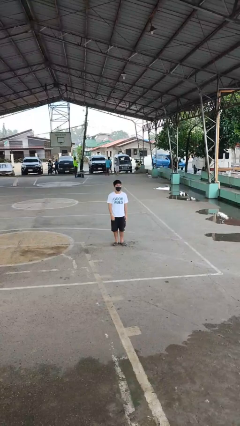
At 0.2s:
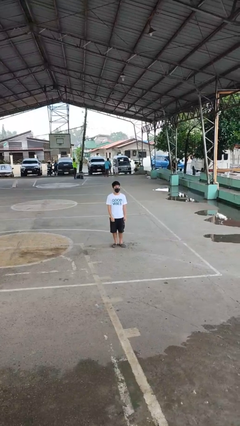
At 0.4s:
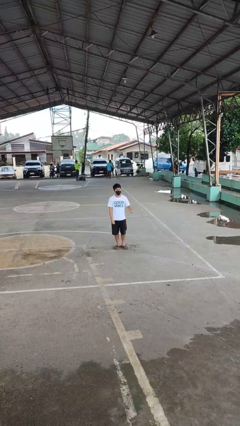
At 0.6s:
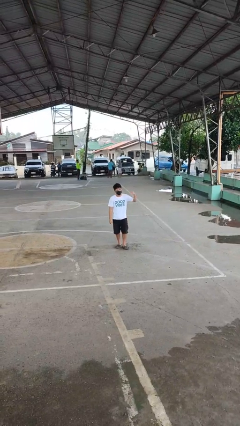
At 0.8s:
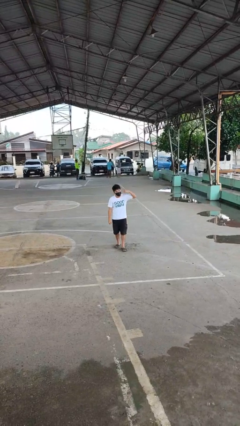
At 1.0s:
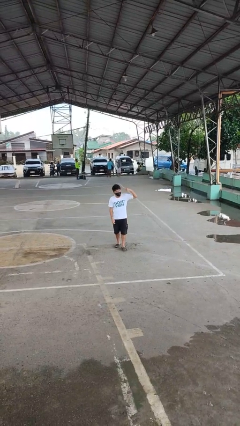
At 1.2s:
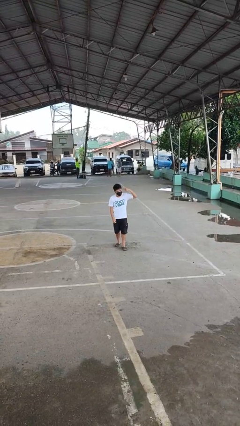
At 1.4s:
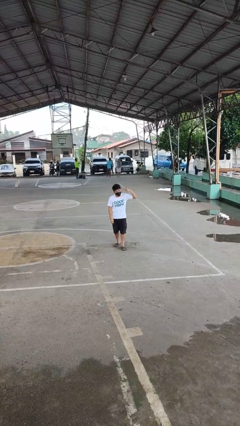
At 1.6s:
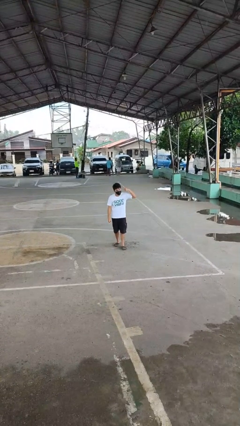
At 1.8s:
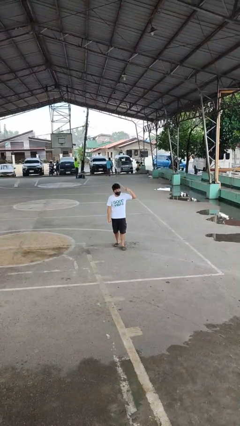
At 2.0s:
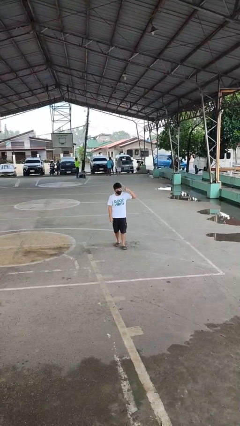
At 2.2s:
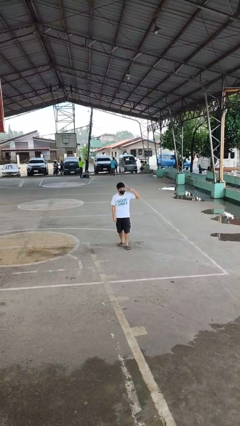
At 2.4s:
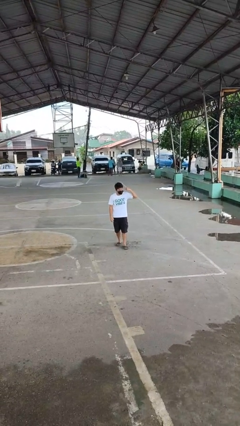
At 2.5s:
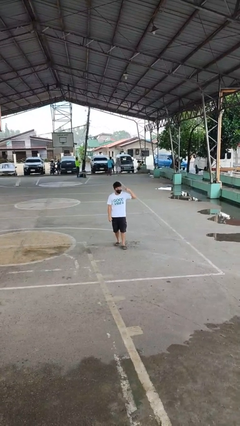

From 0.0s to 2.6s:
person gestures listen closely

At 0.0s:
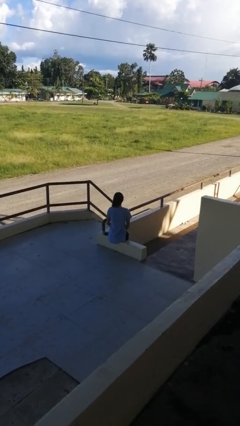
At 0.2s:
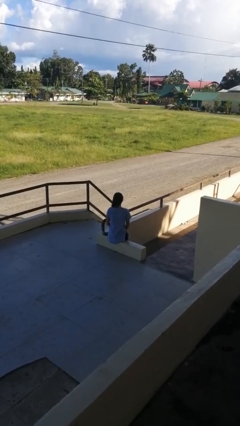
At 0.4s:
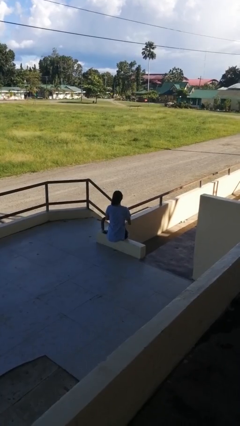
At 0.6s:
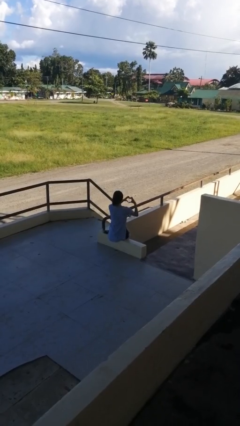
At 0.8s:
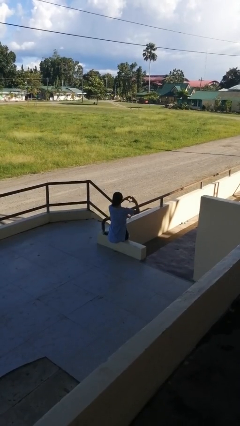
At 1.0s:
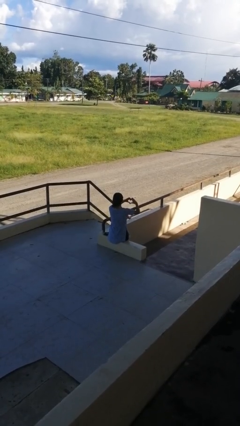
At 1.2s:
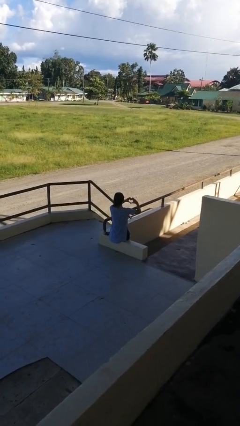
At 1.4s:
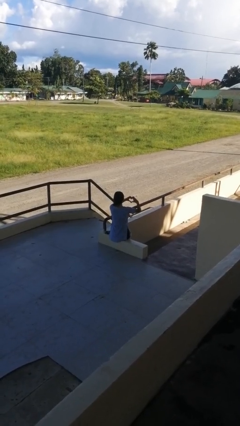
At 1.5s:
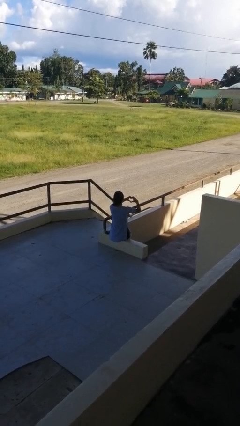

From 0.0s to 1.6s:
person gestures heart

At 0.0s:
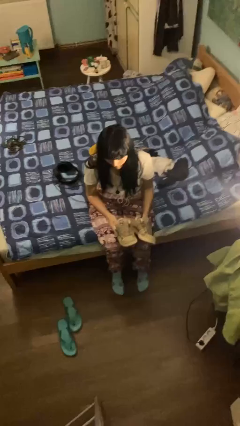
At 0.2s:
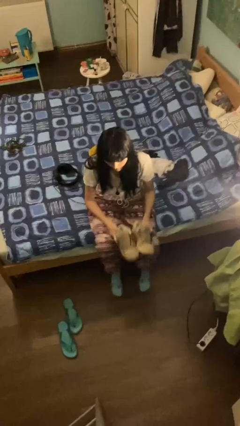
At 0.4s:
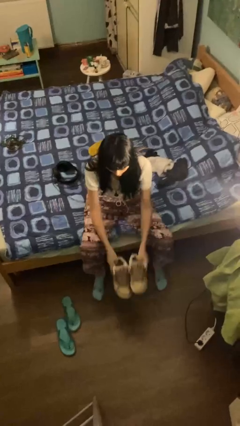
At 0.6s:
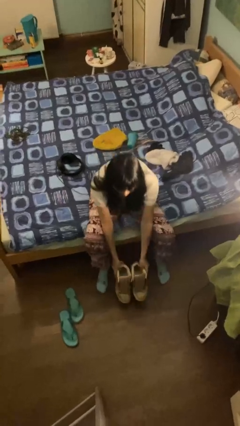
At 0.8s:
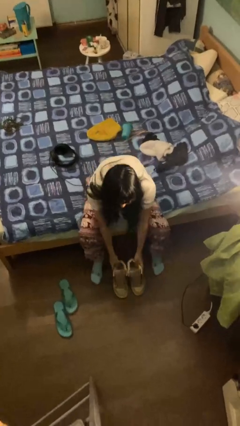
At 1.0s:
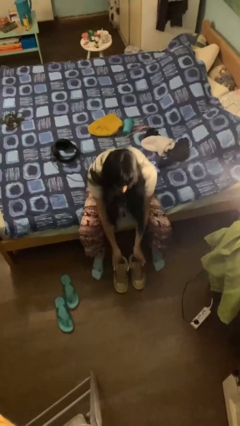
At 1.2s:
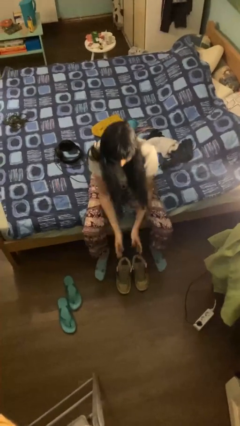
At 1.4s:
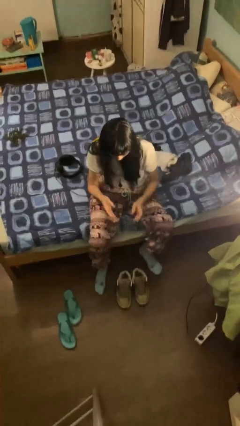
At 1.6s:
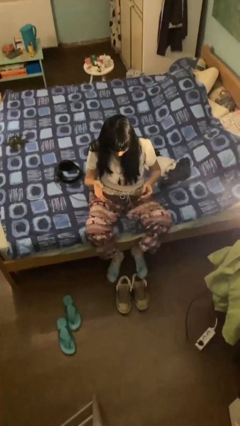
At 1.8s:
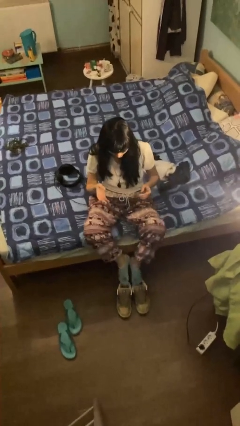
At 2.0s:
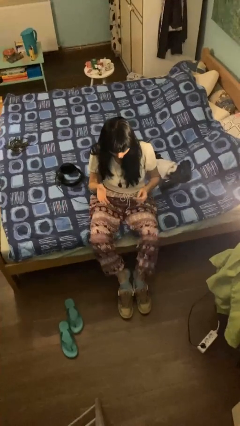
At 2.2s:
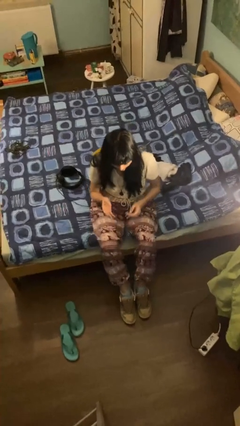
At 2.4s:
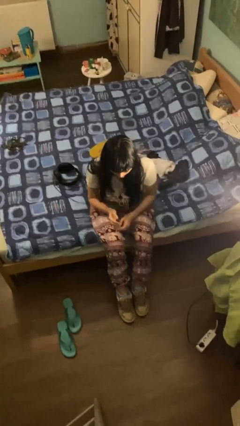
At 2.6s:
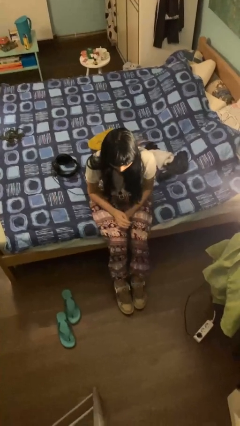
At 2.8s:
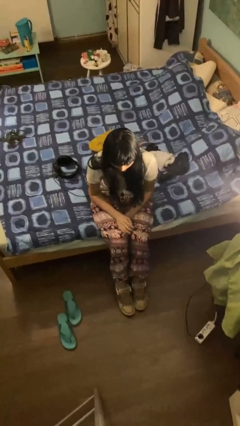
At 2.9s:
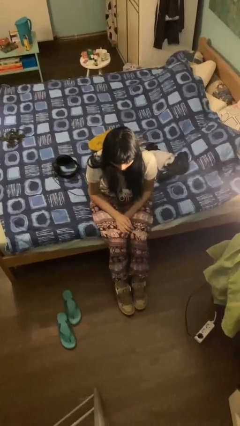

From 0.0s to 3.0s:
person puts on shoes

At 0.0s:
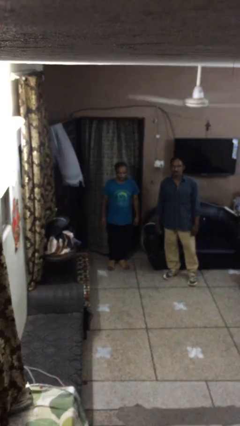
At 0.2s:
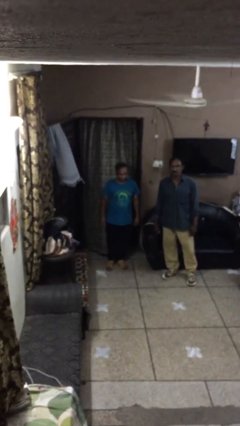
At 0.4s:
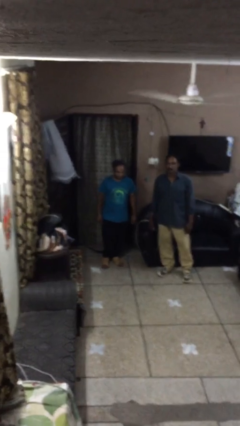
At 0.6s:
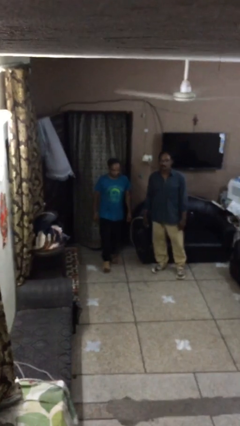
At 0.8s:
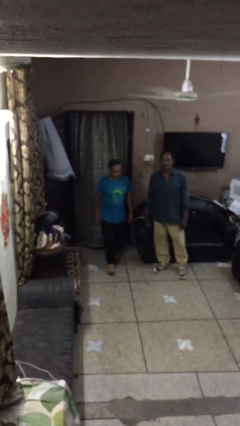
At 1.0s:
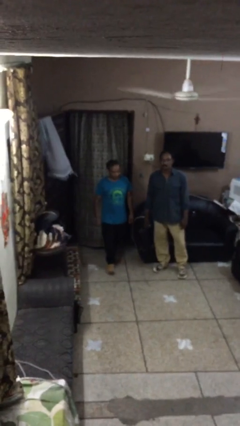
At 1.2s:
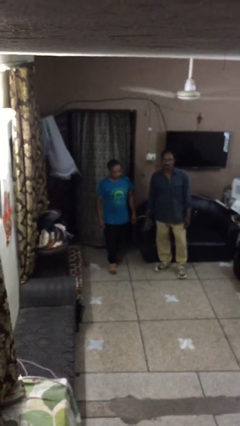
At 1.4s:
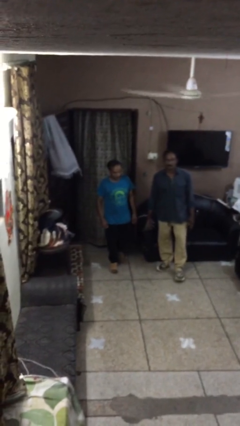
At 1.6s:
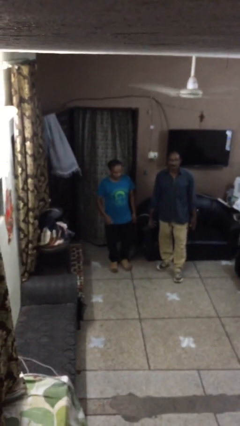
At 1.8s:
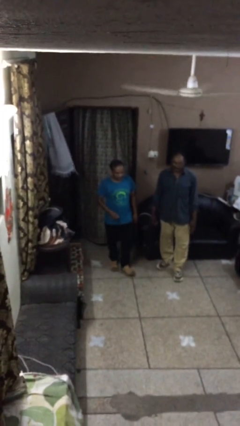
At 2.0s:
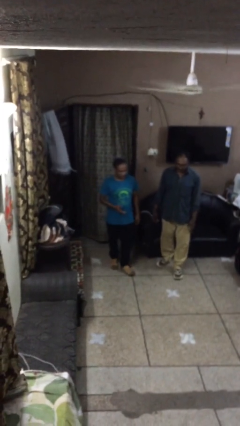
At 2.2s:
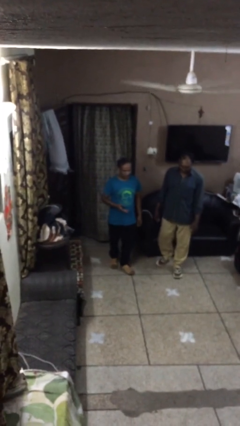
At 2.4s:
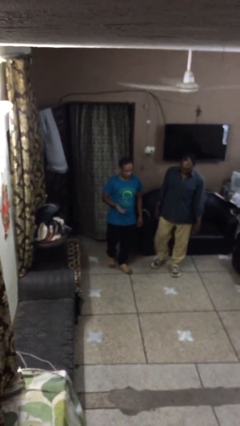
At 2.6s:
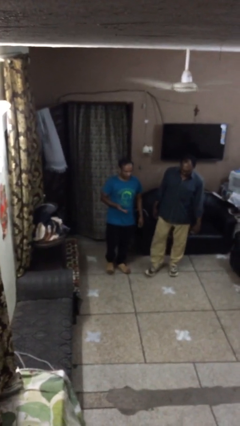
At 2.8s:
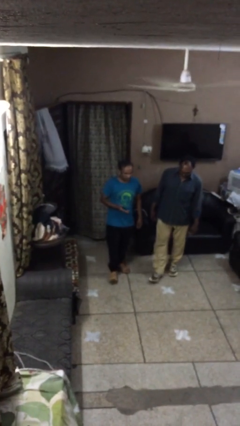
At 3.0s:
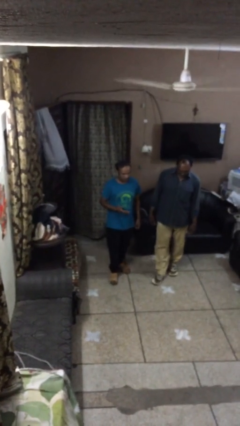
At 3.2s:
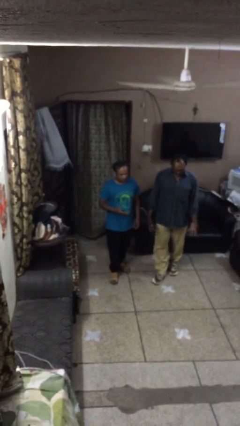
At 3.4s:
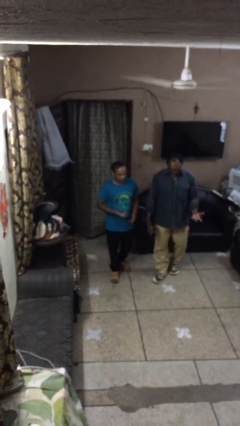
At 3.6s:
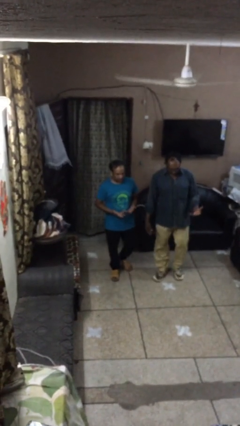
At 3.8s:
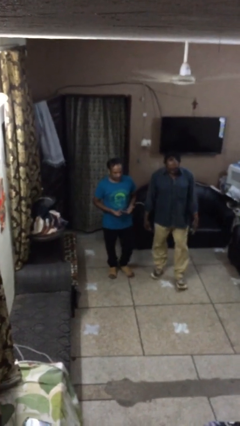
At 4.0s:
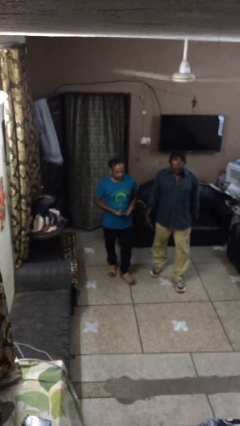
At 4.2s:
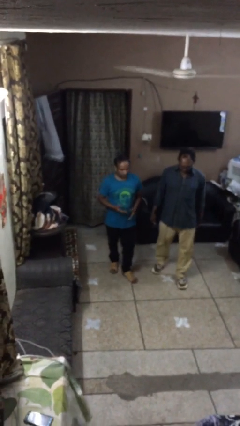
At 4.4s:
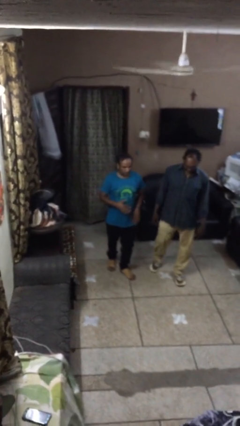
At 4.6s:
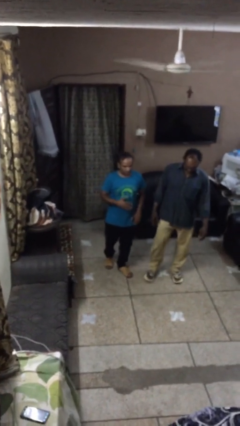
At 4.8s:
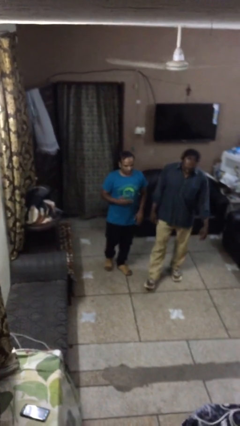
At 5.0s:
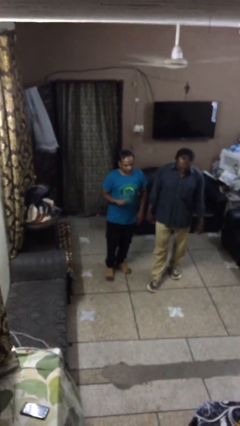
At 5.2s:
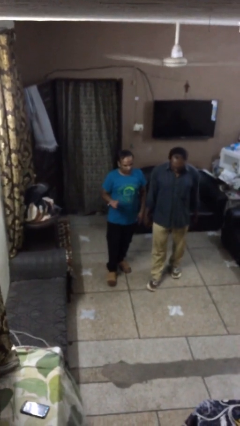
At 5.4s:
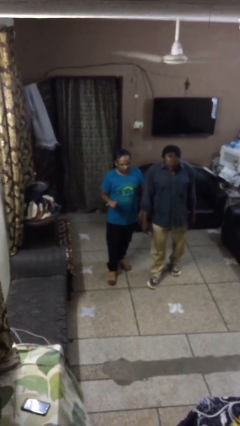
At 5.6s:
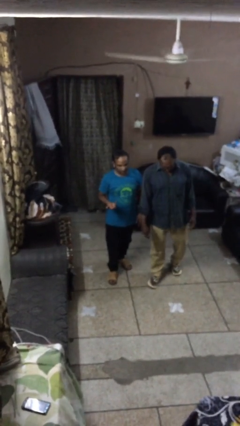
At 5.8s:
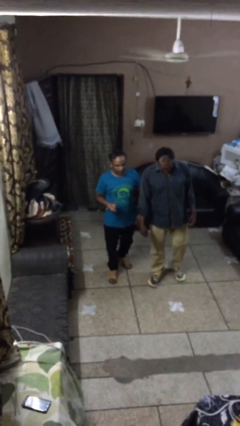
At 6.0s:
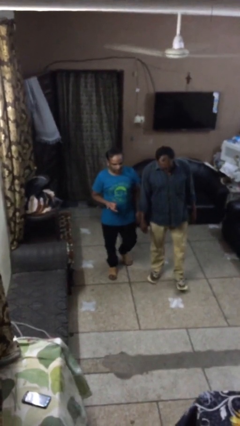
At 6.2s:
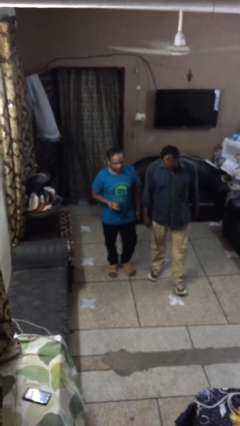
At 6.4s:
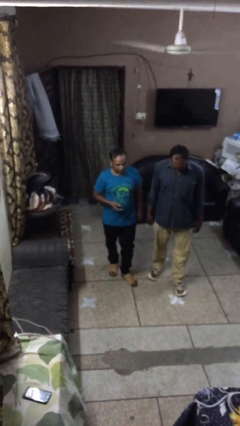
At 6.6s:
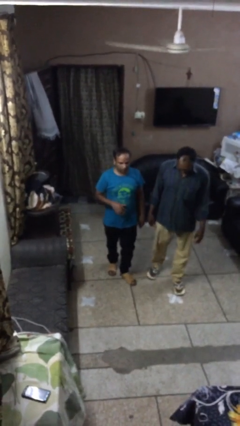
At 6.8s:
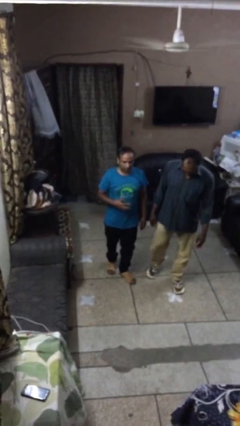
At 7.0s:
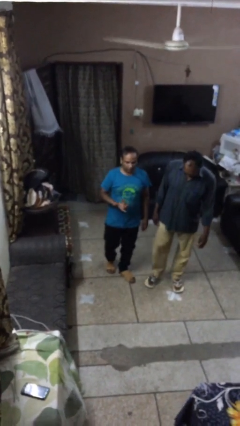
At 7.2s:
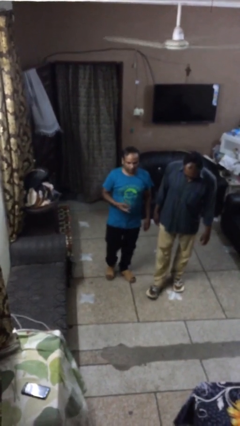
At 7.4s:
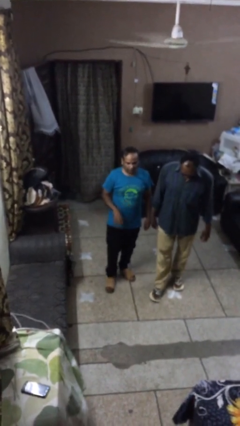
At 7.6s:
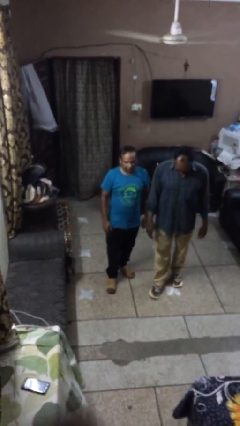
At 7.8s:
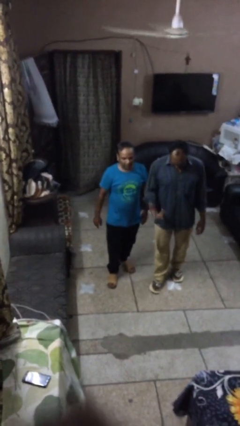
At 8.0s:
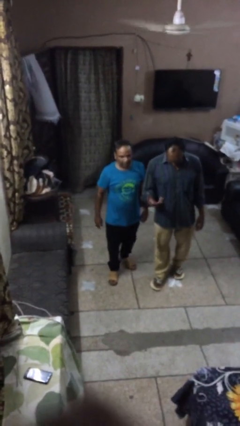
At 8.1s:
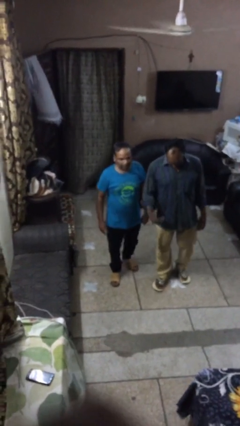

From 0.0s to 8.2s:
person talks to person

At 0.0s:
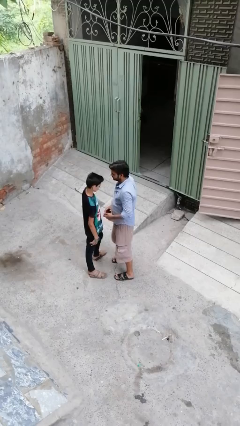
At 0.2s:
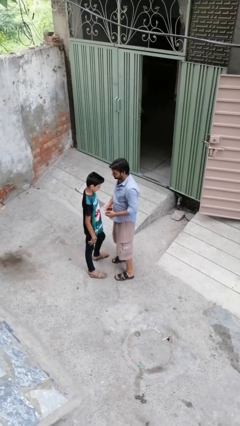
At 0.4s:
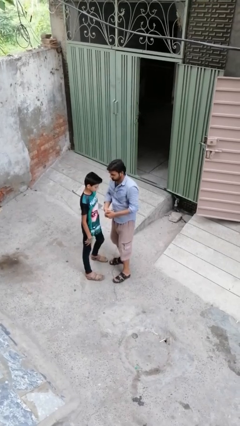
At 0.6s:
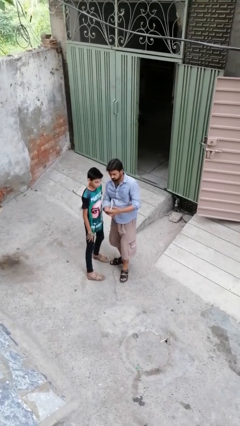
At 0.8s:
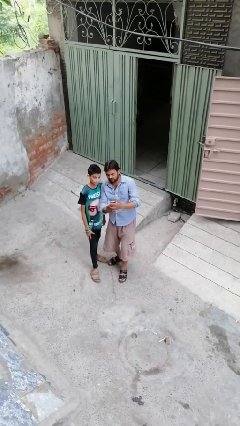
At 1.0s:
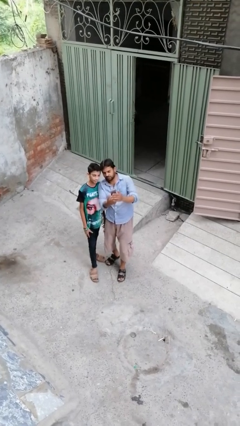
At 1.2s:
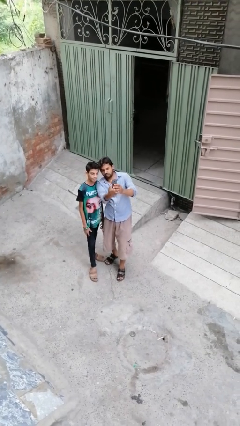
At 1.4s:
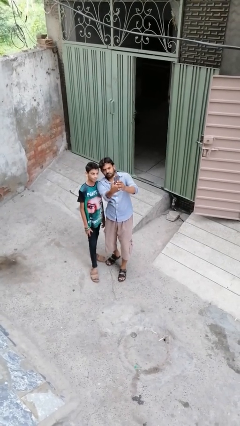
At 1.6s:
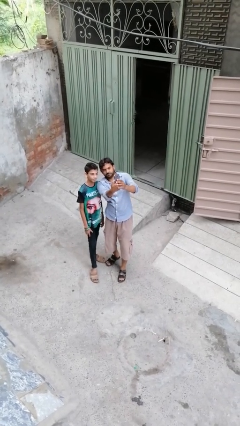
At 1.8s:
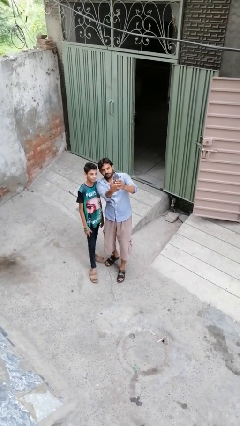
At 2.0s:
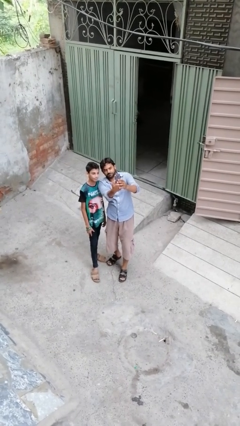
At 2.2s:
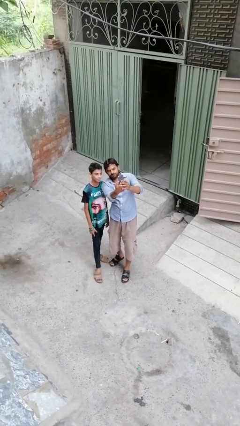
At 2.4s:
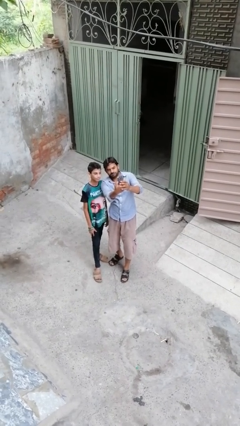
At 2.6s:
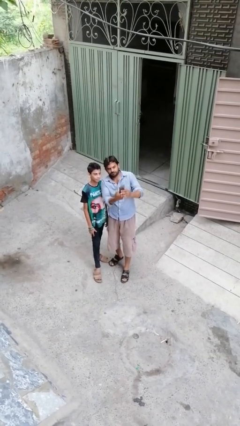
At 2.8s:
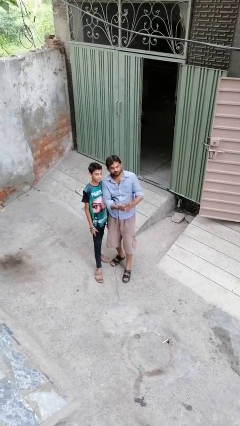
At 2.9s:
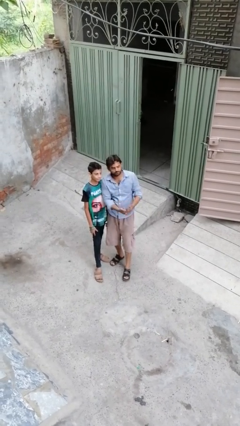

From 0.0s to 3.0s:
person takes selfie with person
